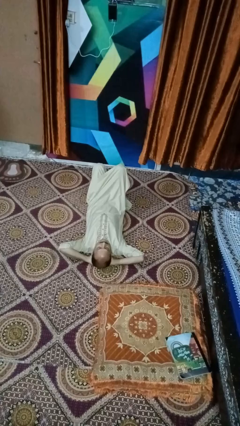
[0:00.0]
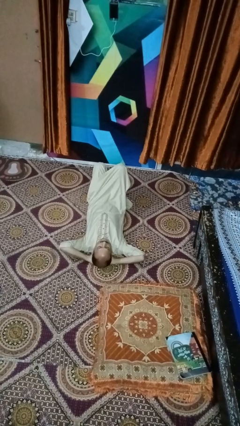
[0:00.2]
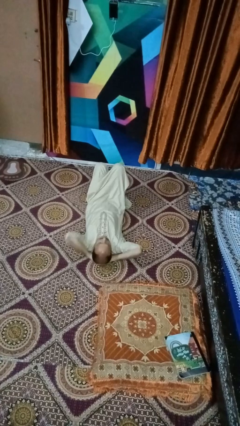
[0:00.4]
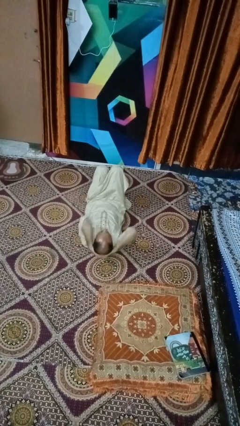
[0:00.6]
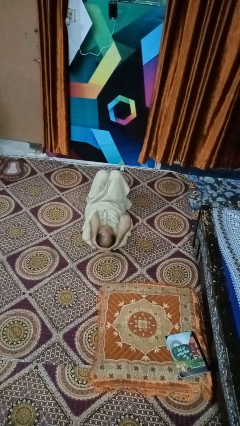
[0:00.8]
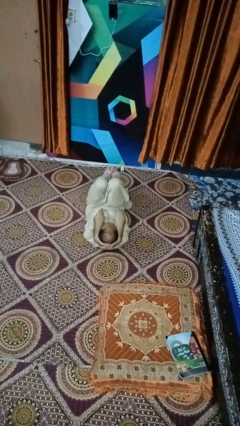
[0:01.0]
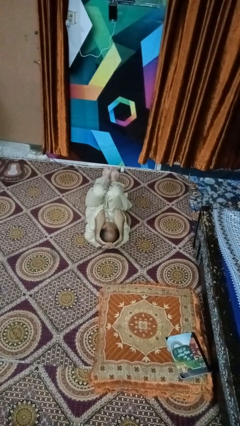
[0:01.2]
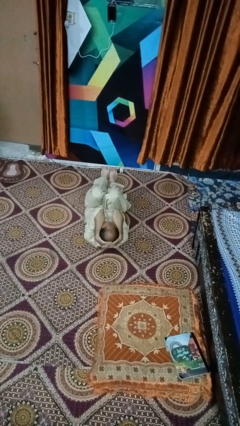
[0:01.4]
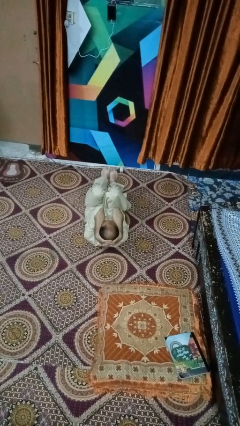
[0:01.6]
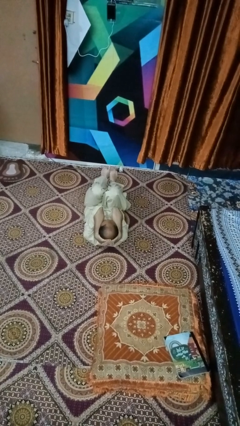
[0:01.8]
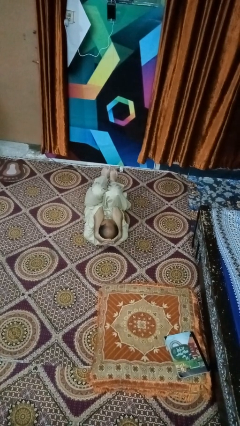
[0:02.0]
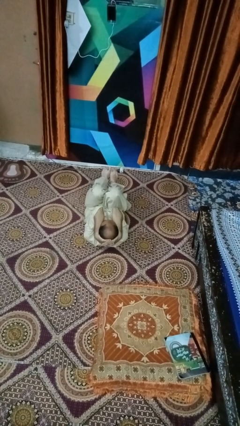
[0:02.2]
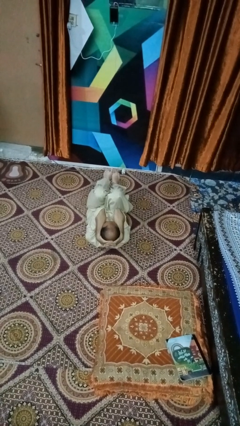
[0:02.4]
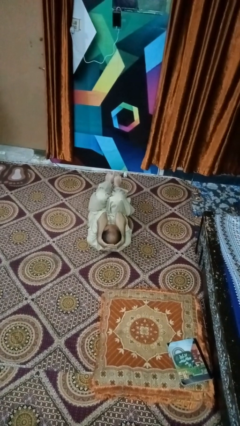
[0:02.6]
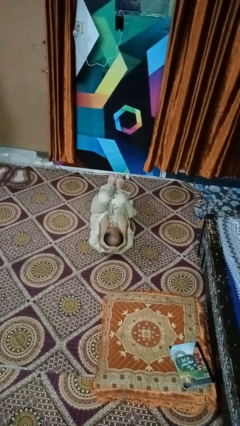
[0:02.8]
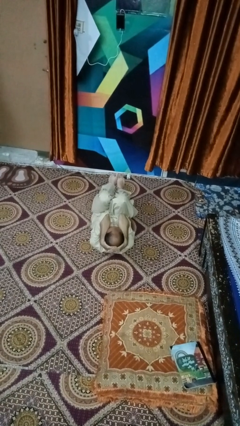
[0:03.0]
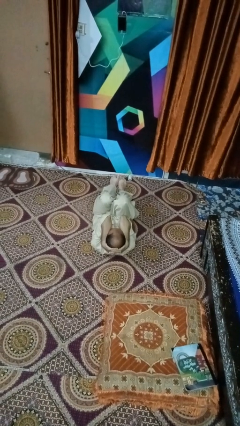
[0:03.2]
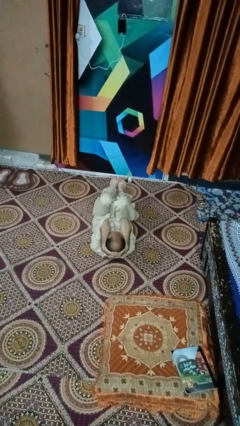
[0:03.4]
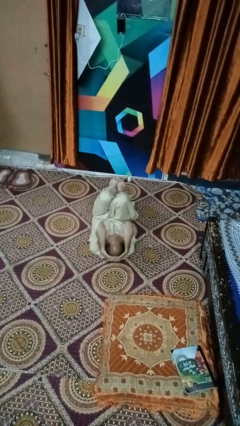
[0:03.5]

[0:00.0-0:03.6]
person exercises with situp

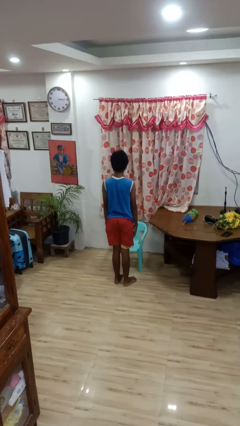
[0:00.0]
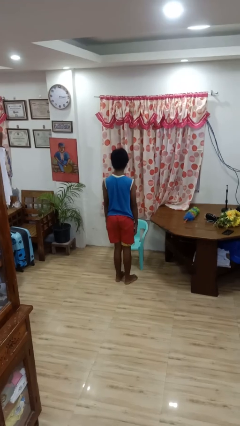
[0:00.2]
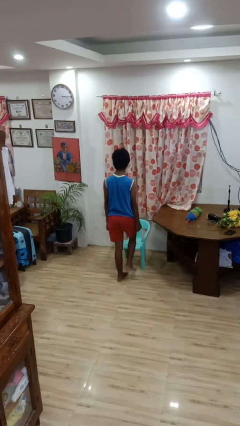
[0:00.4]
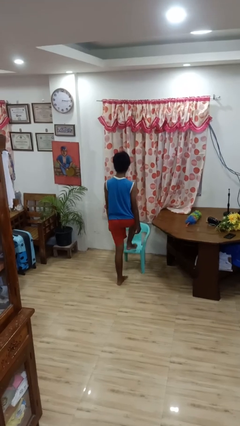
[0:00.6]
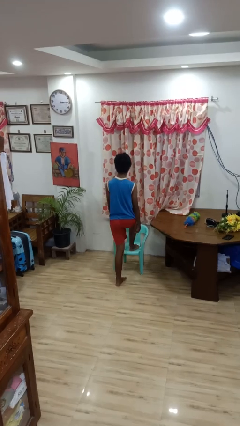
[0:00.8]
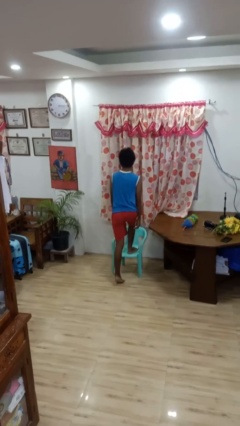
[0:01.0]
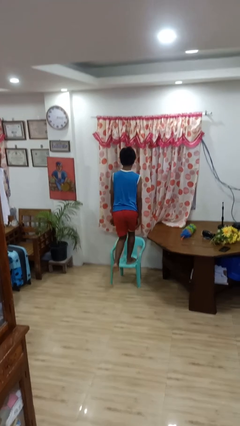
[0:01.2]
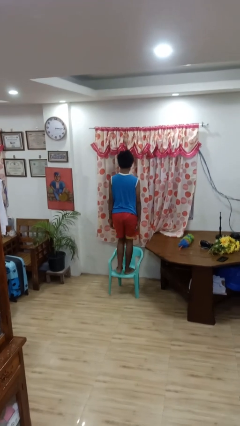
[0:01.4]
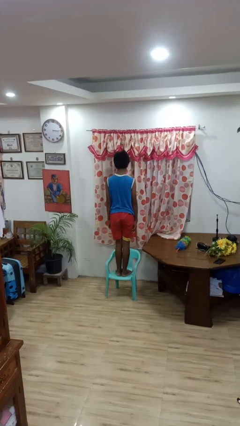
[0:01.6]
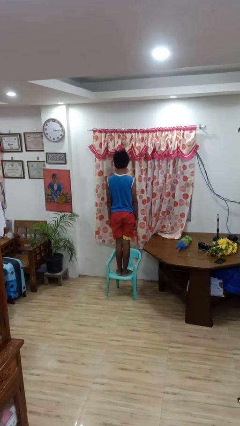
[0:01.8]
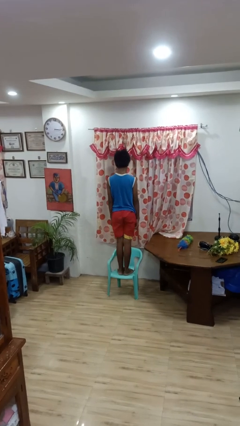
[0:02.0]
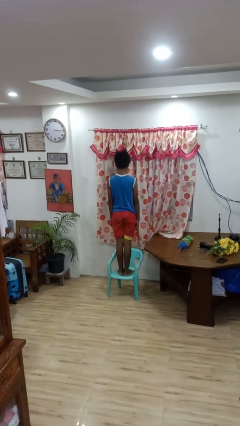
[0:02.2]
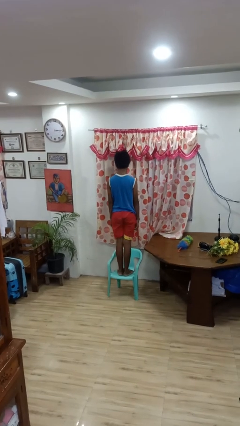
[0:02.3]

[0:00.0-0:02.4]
person climbs on chair

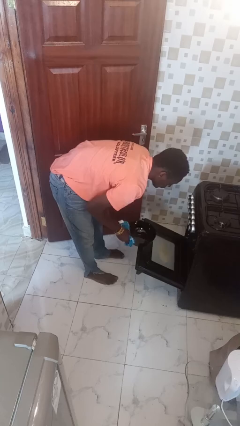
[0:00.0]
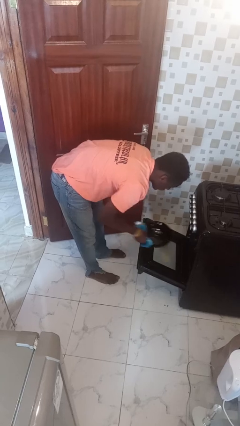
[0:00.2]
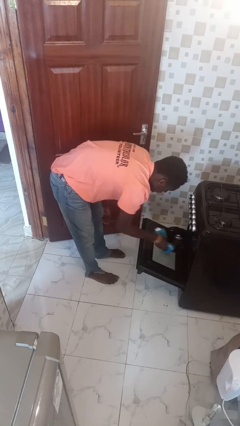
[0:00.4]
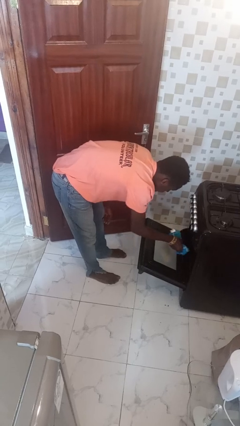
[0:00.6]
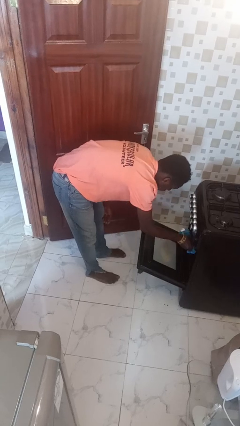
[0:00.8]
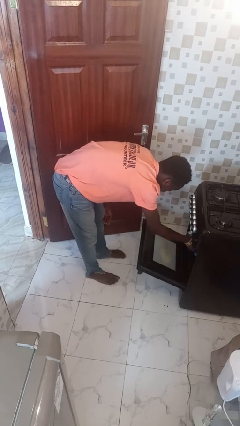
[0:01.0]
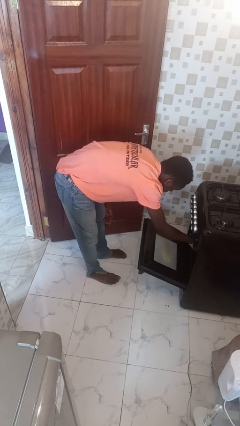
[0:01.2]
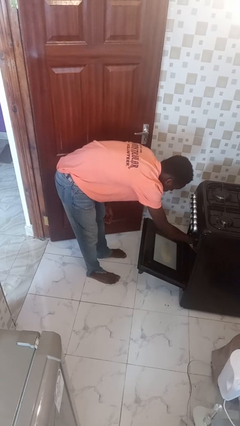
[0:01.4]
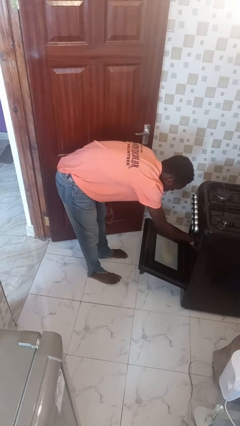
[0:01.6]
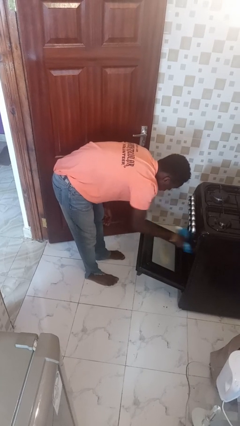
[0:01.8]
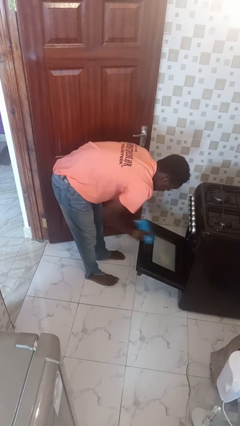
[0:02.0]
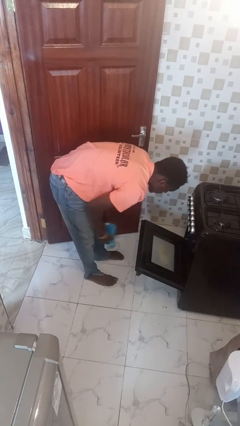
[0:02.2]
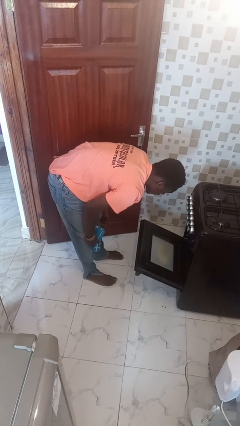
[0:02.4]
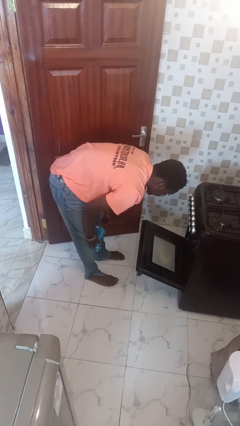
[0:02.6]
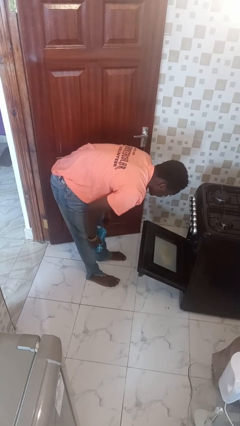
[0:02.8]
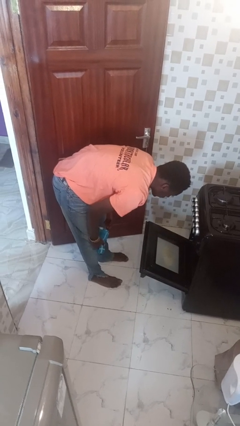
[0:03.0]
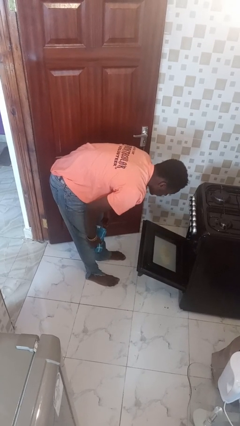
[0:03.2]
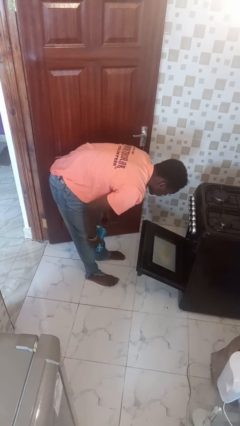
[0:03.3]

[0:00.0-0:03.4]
person puts object into oven

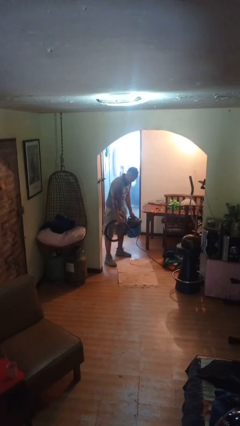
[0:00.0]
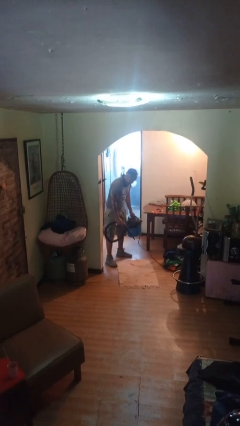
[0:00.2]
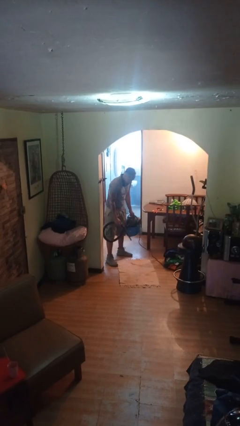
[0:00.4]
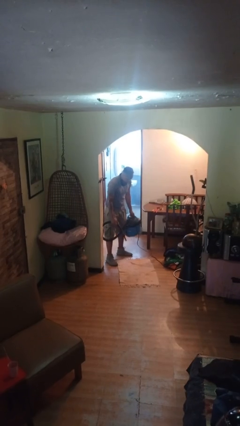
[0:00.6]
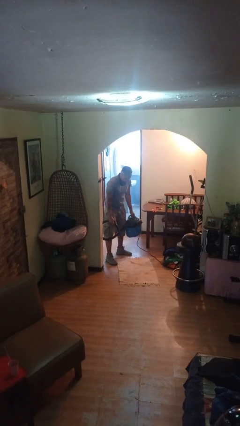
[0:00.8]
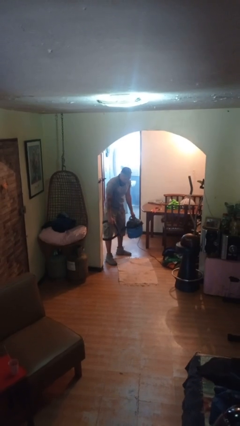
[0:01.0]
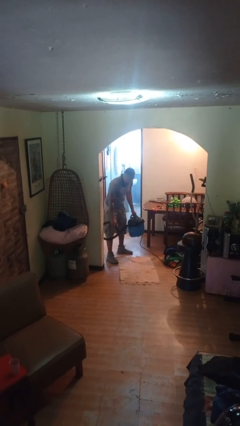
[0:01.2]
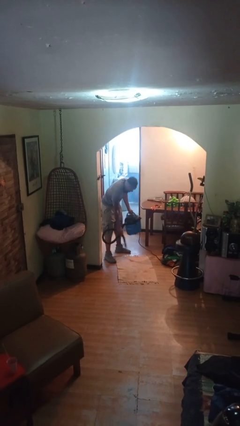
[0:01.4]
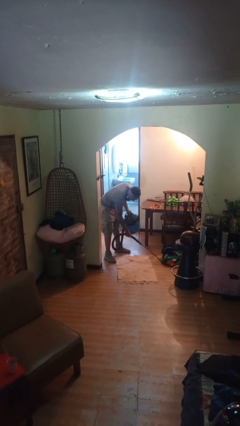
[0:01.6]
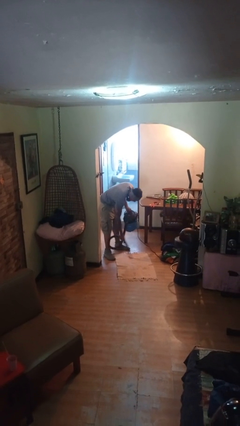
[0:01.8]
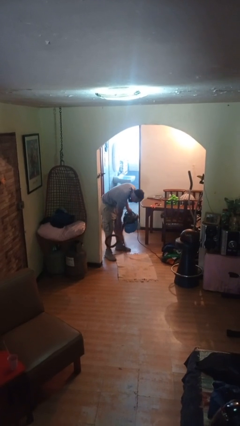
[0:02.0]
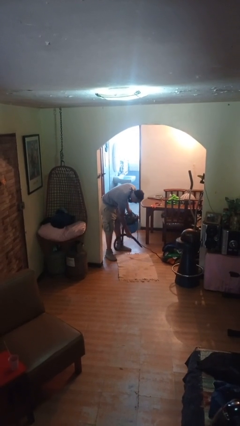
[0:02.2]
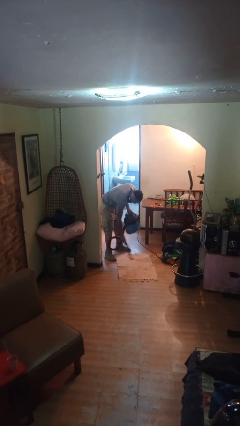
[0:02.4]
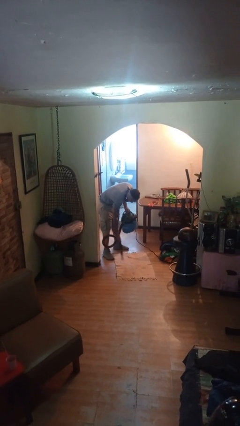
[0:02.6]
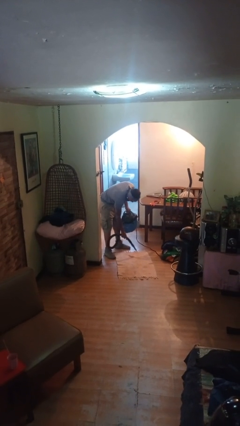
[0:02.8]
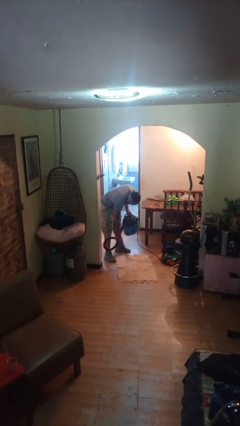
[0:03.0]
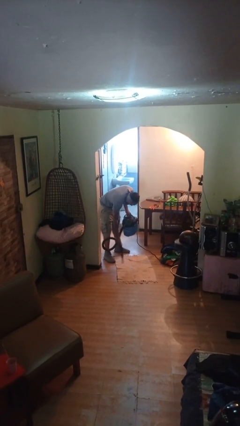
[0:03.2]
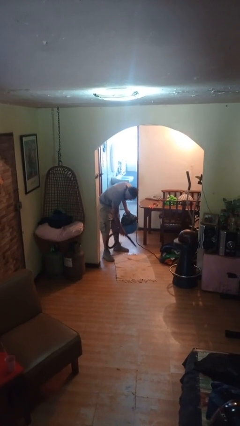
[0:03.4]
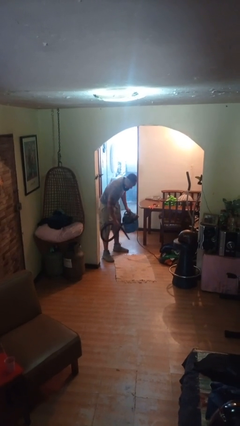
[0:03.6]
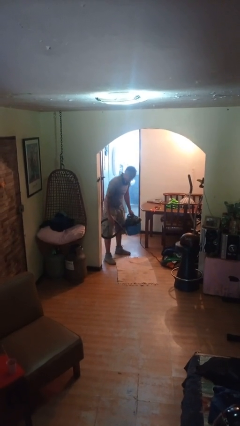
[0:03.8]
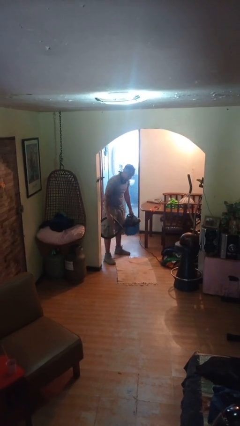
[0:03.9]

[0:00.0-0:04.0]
person vacuums carpet

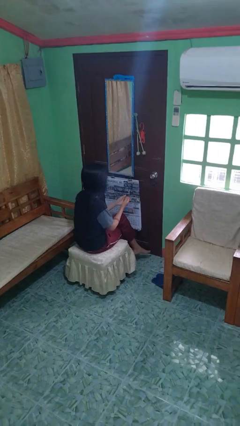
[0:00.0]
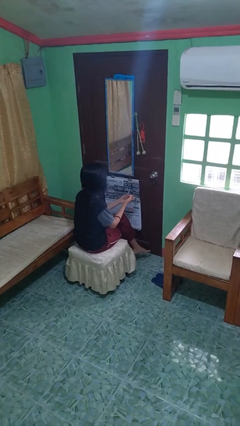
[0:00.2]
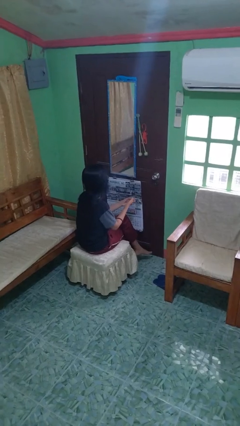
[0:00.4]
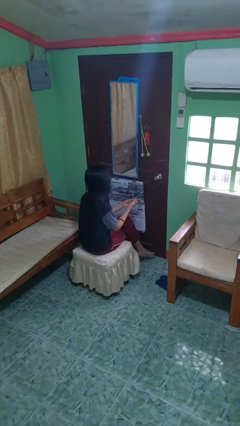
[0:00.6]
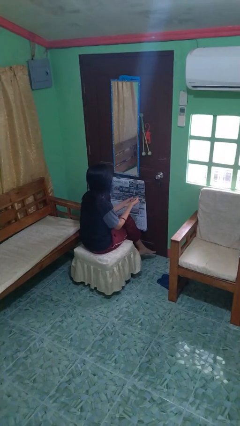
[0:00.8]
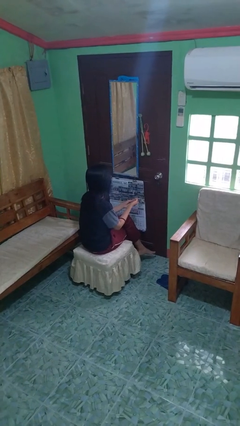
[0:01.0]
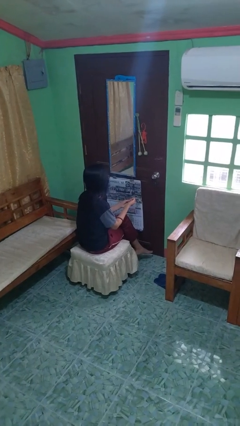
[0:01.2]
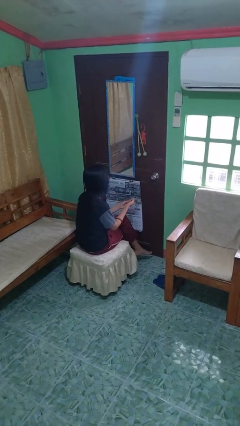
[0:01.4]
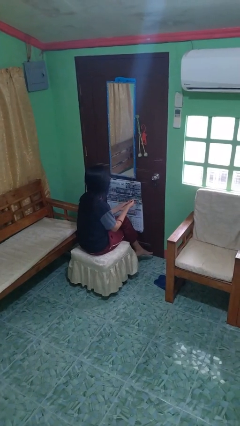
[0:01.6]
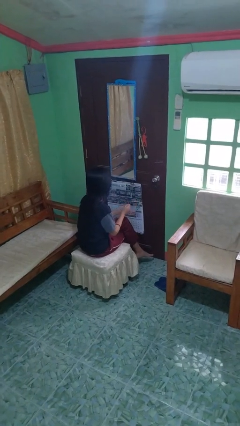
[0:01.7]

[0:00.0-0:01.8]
person cracks knuckles

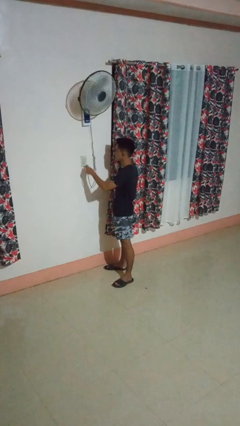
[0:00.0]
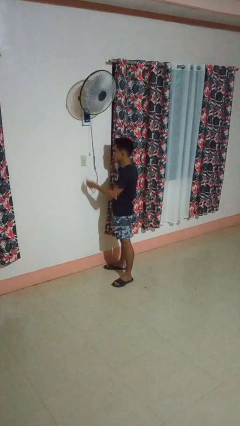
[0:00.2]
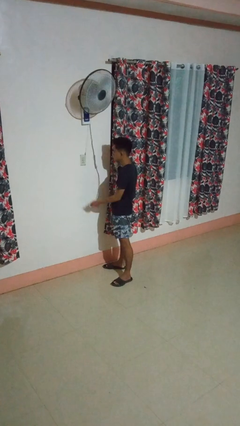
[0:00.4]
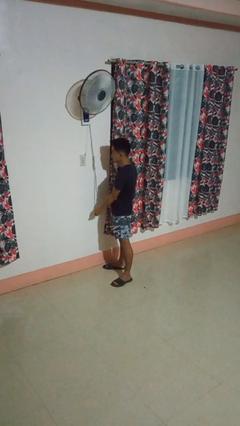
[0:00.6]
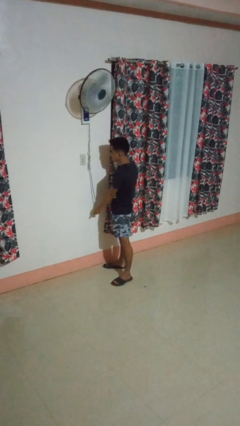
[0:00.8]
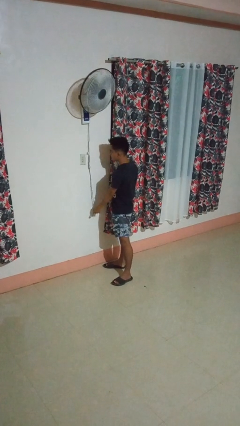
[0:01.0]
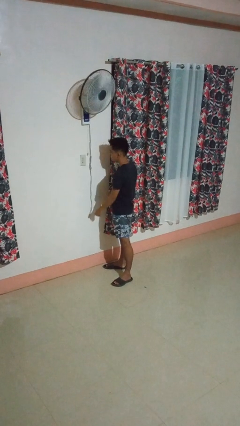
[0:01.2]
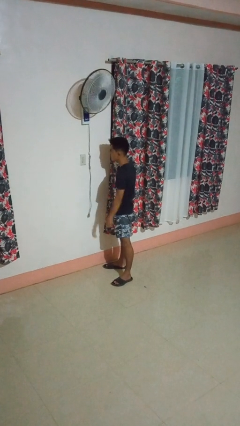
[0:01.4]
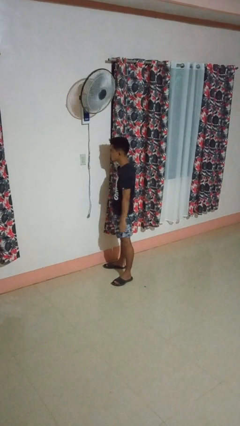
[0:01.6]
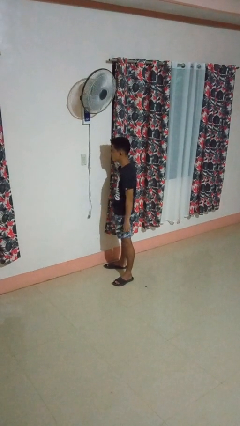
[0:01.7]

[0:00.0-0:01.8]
person unplugs from electrical socket
